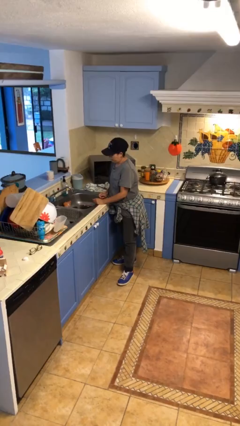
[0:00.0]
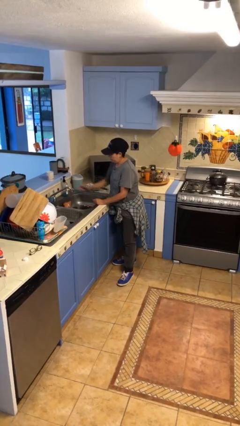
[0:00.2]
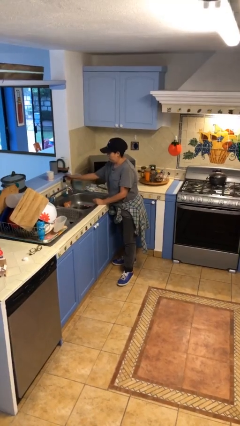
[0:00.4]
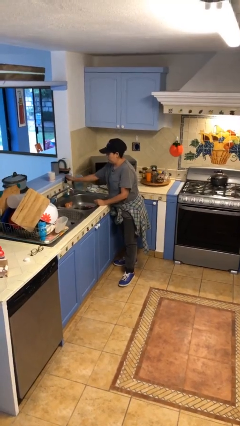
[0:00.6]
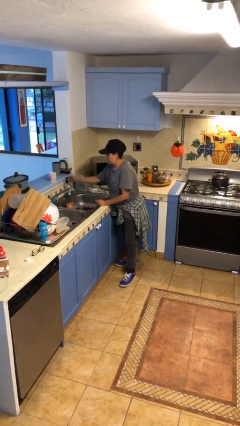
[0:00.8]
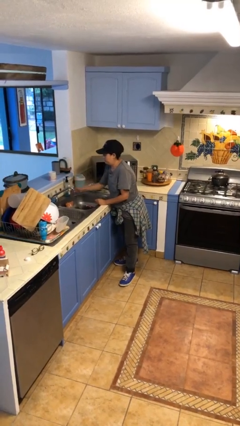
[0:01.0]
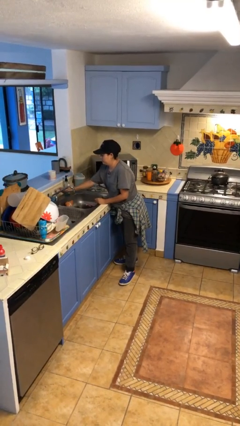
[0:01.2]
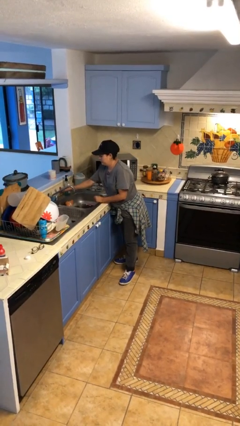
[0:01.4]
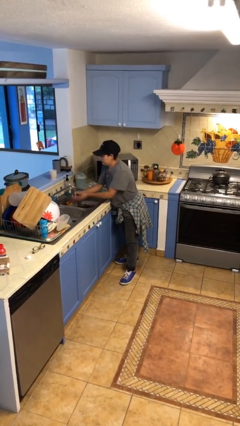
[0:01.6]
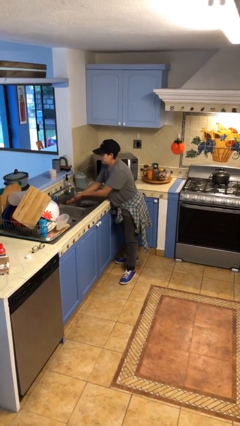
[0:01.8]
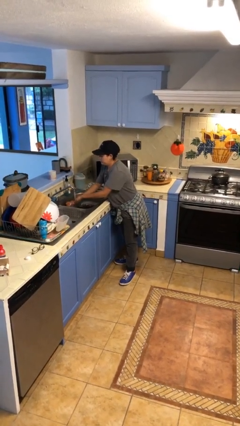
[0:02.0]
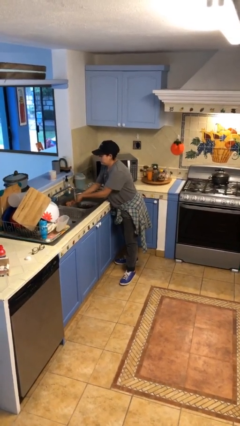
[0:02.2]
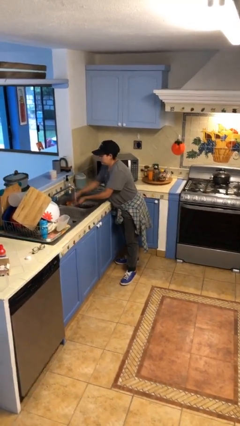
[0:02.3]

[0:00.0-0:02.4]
person washes hands

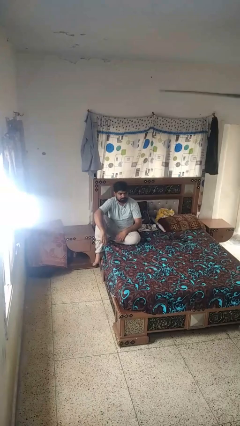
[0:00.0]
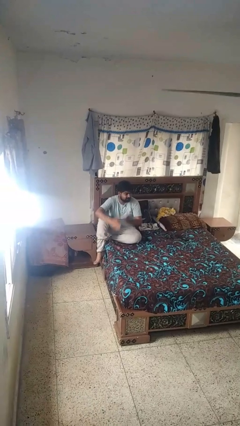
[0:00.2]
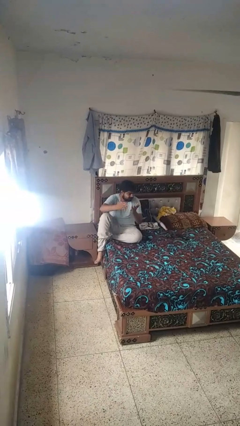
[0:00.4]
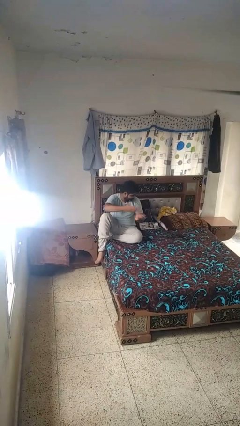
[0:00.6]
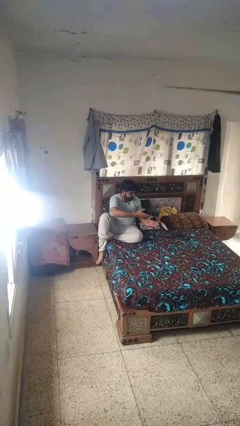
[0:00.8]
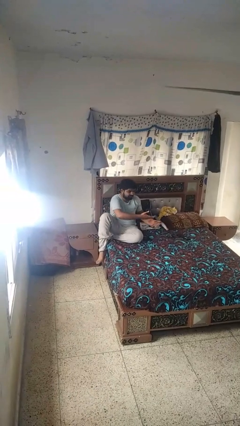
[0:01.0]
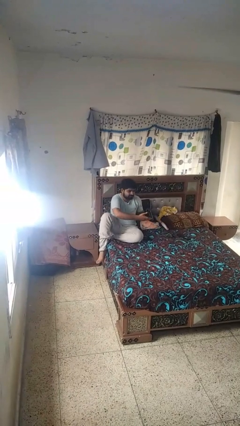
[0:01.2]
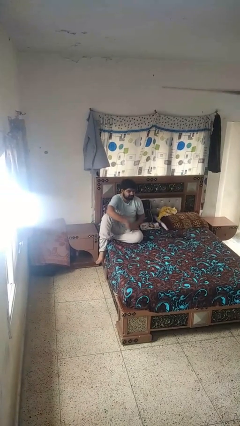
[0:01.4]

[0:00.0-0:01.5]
person gestures come here

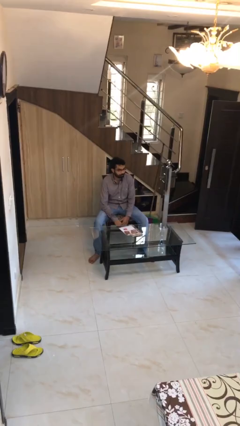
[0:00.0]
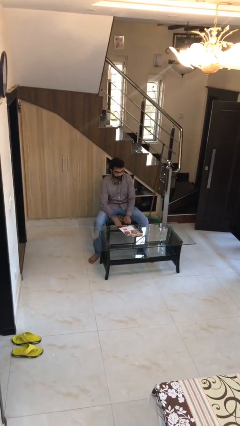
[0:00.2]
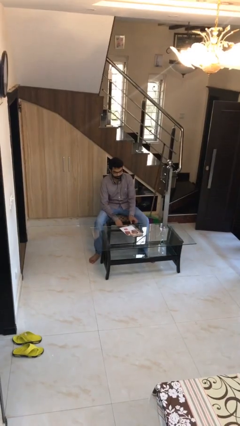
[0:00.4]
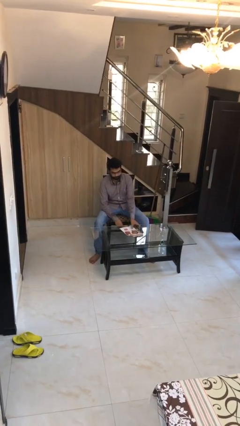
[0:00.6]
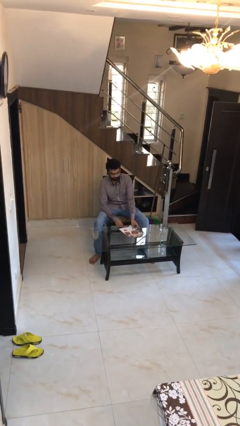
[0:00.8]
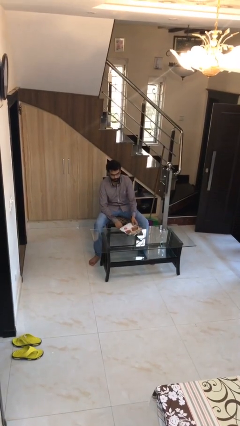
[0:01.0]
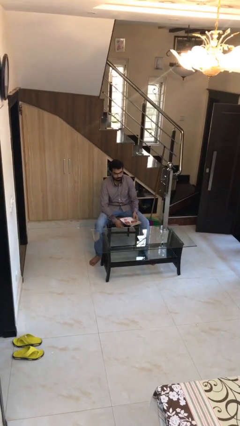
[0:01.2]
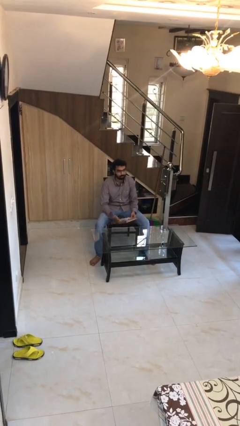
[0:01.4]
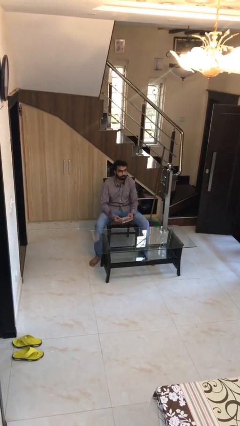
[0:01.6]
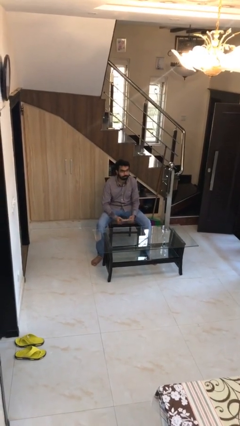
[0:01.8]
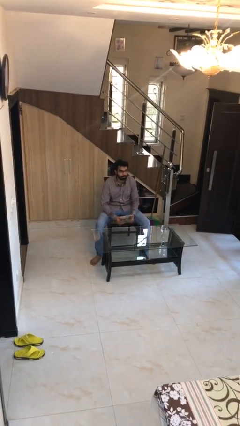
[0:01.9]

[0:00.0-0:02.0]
person picks up object from table

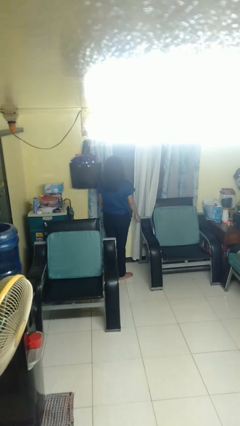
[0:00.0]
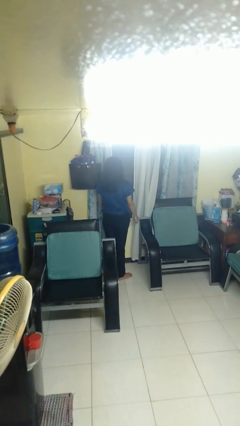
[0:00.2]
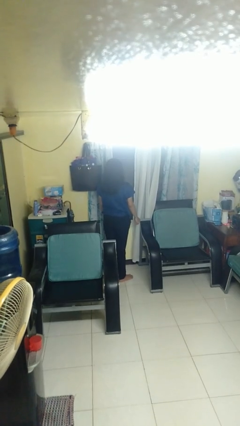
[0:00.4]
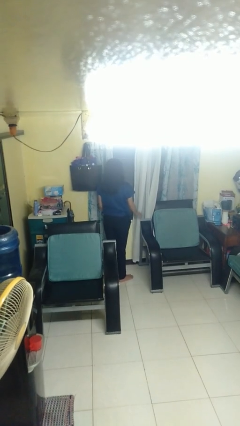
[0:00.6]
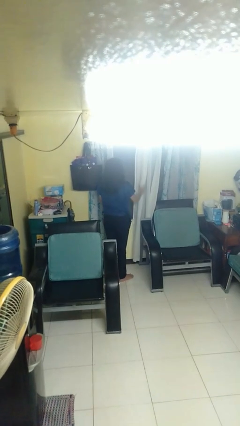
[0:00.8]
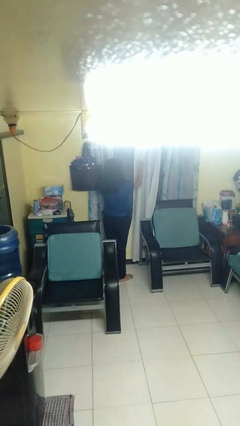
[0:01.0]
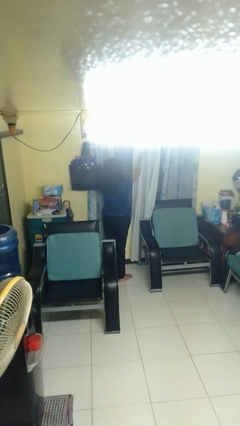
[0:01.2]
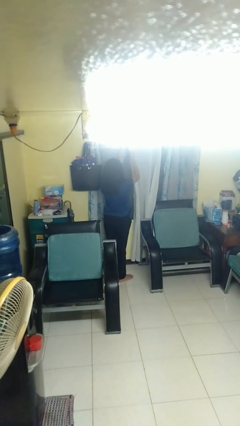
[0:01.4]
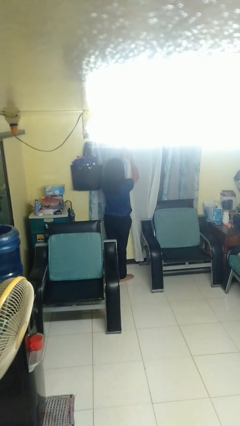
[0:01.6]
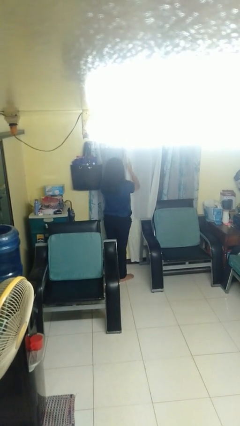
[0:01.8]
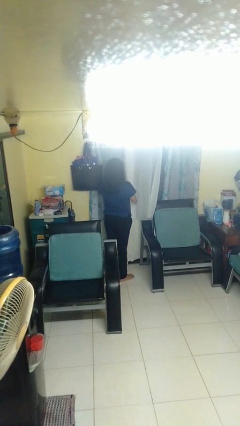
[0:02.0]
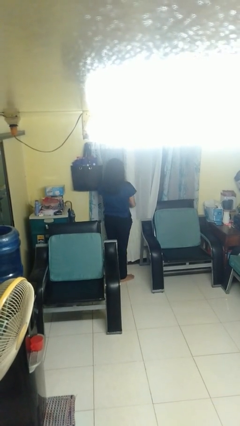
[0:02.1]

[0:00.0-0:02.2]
person closes curtains

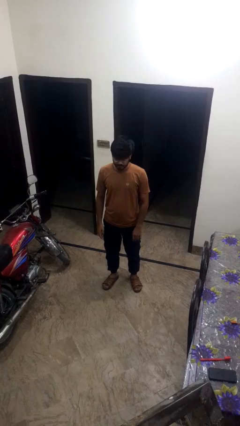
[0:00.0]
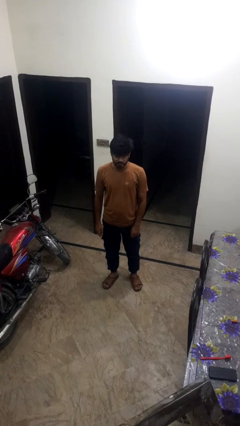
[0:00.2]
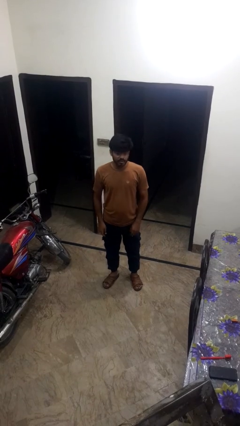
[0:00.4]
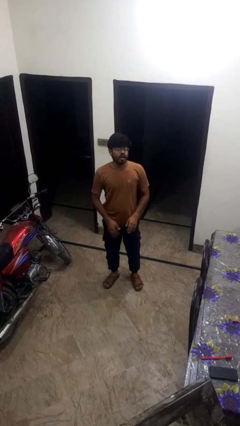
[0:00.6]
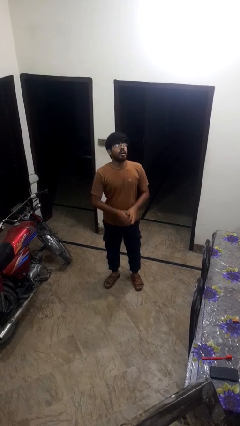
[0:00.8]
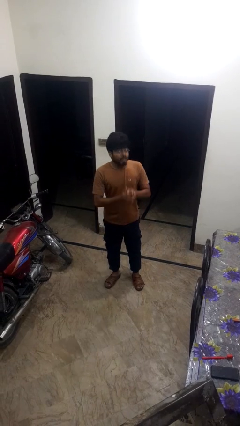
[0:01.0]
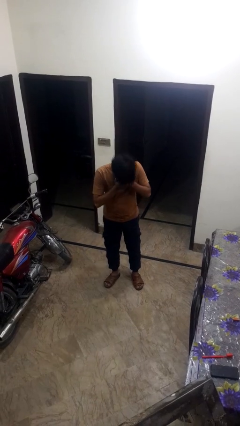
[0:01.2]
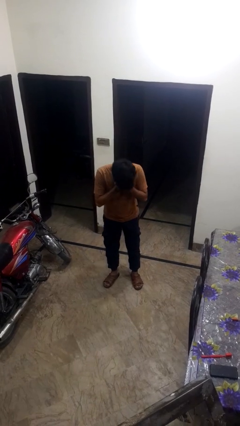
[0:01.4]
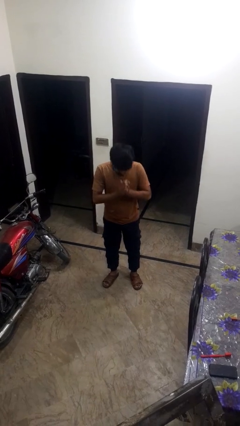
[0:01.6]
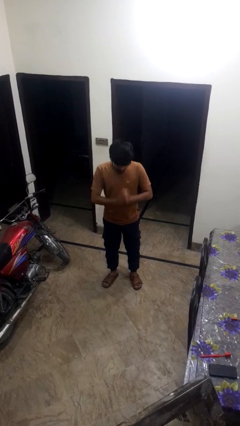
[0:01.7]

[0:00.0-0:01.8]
person sneezes into hand

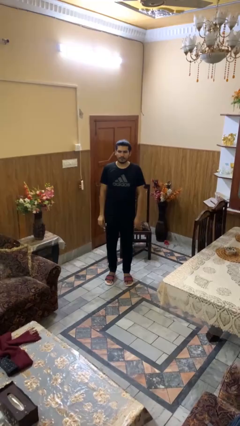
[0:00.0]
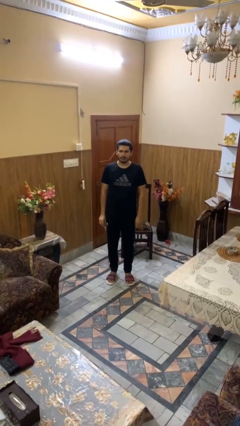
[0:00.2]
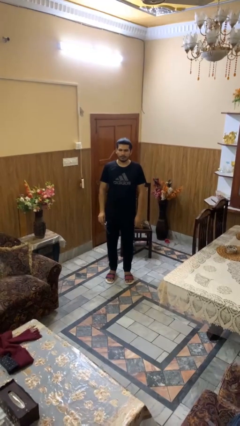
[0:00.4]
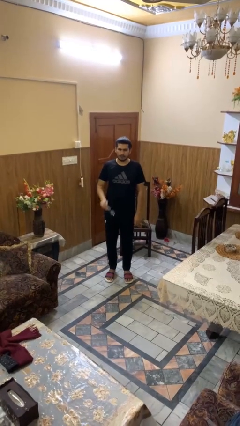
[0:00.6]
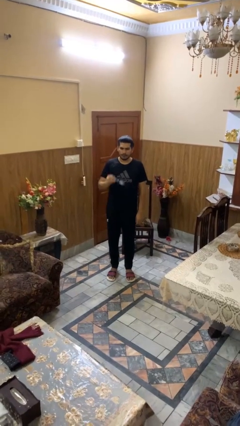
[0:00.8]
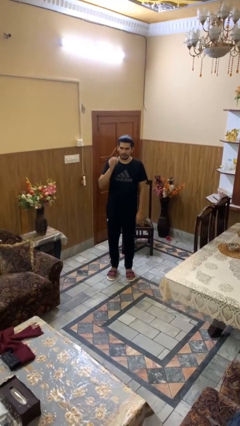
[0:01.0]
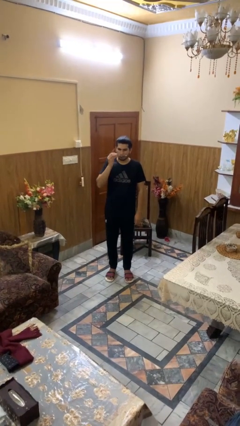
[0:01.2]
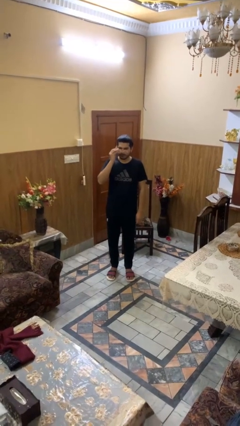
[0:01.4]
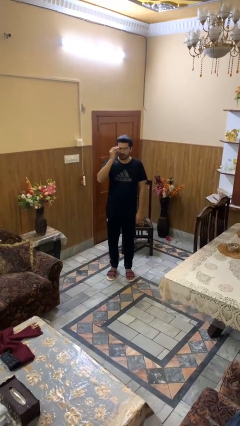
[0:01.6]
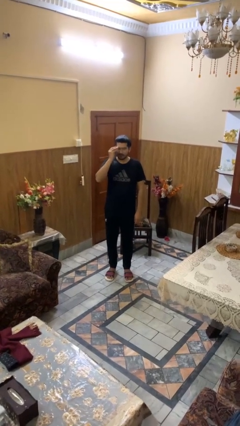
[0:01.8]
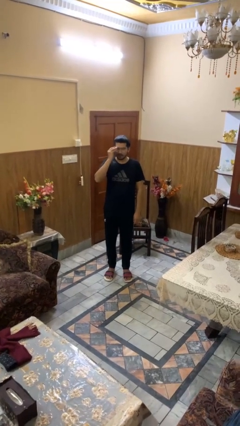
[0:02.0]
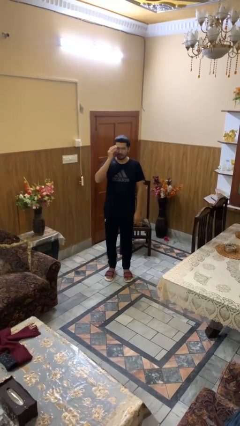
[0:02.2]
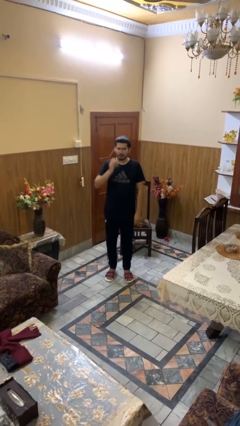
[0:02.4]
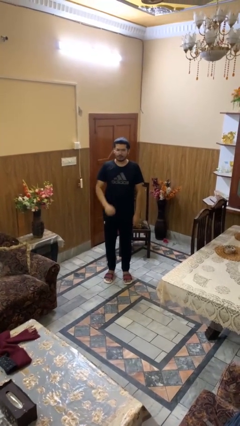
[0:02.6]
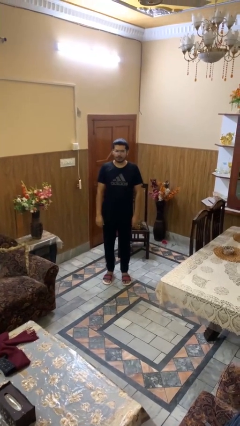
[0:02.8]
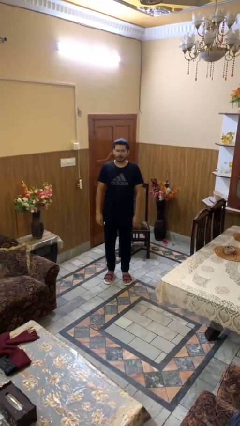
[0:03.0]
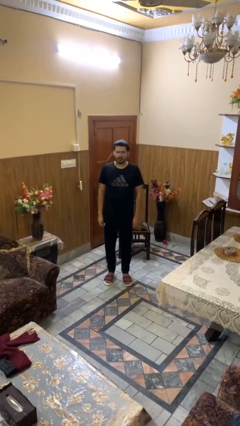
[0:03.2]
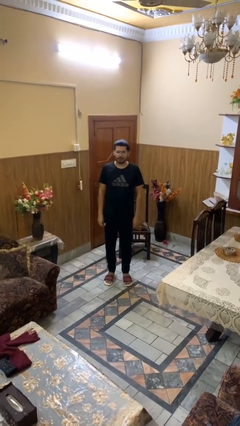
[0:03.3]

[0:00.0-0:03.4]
person puts on glasses

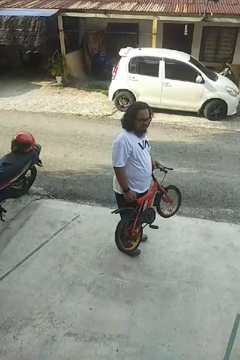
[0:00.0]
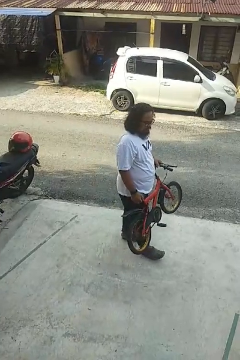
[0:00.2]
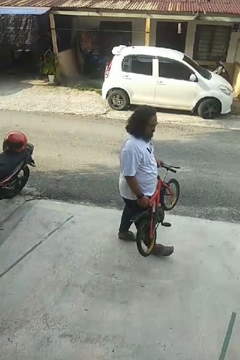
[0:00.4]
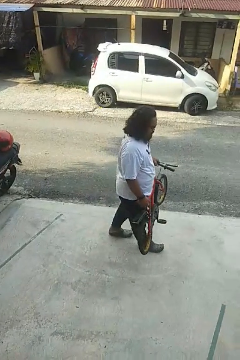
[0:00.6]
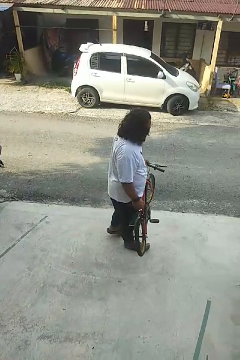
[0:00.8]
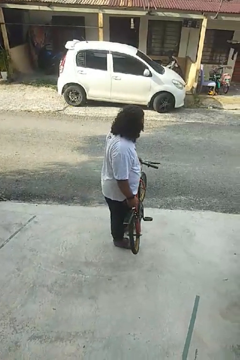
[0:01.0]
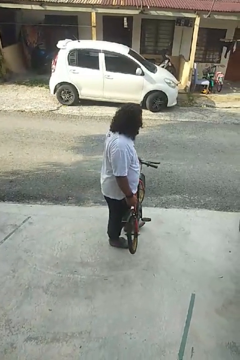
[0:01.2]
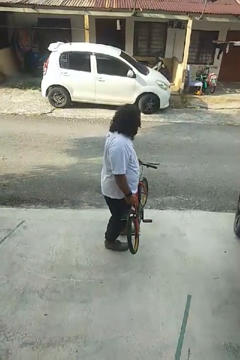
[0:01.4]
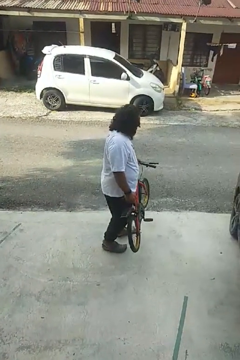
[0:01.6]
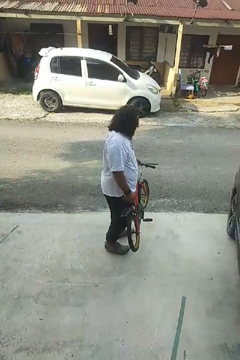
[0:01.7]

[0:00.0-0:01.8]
person carries bicycle

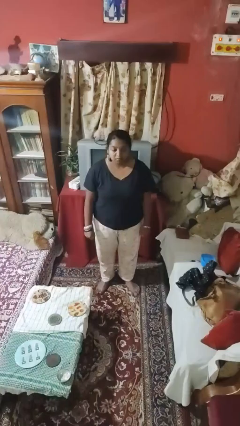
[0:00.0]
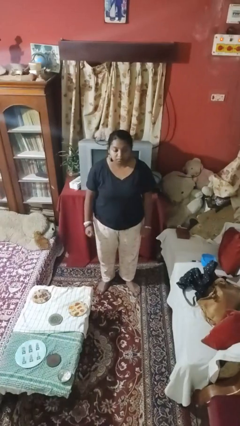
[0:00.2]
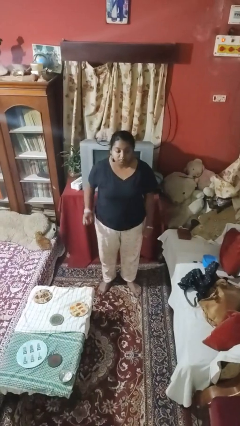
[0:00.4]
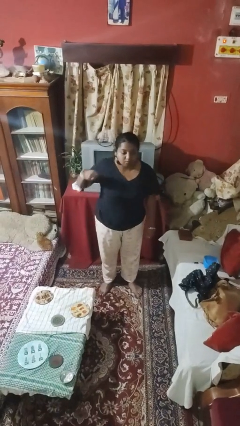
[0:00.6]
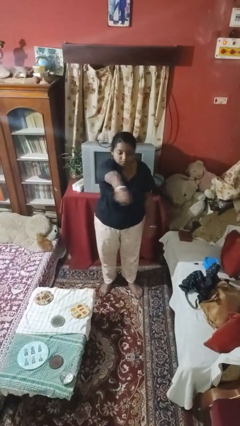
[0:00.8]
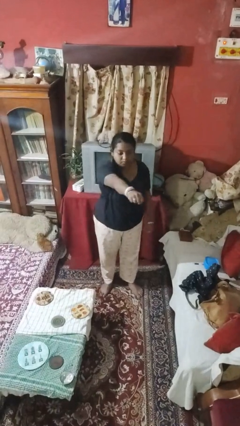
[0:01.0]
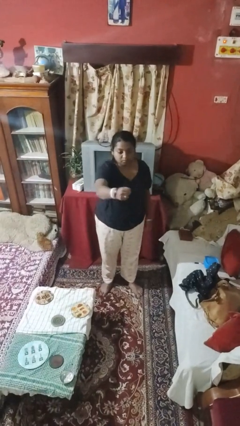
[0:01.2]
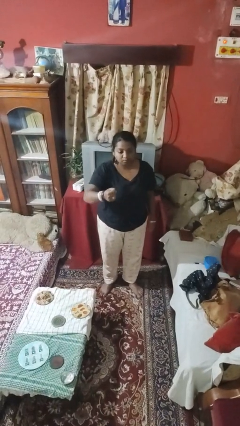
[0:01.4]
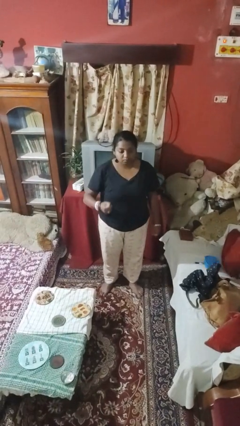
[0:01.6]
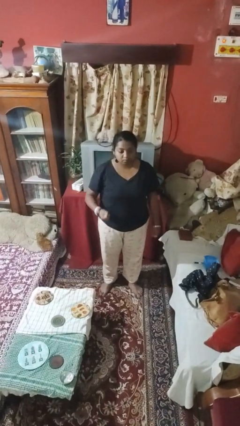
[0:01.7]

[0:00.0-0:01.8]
person punches
